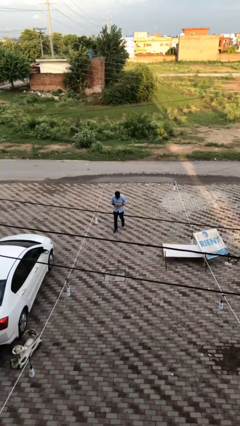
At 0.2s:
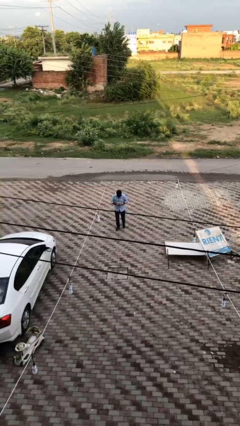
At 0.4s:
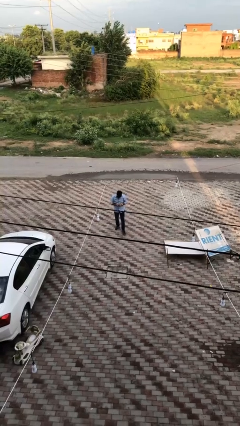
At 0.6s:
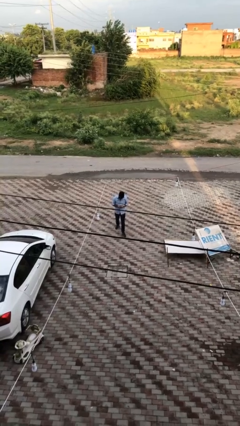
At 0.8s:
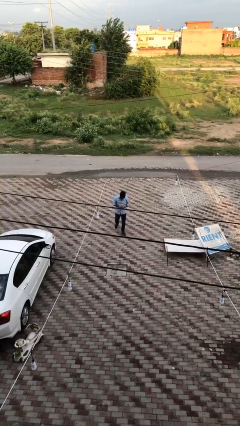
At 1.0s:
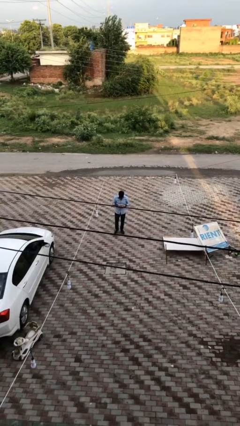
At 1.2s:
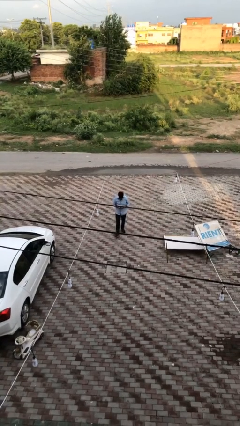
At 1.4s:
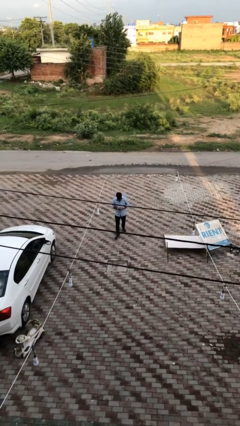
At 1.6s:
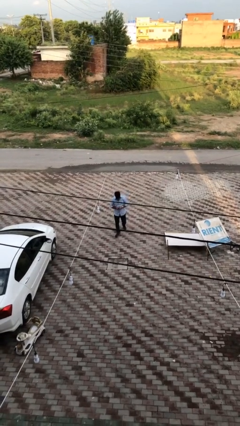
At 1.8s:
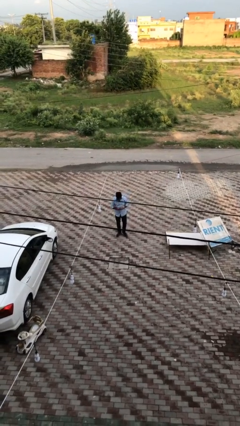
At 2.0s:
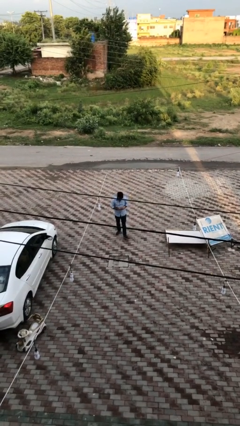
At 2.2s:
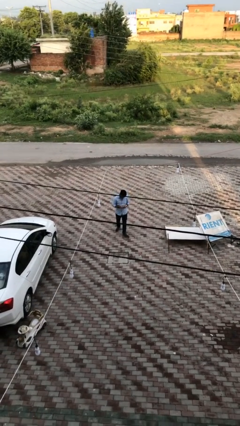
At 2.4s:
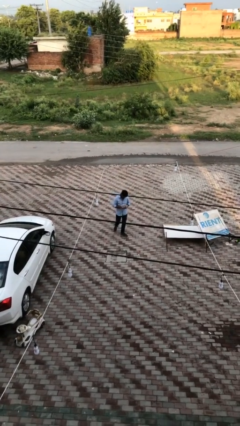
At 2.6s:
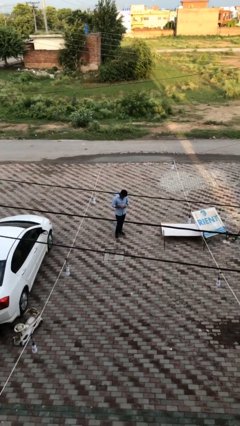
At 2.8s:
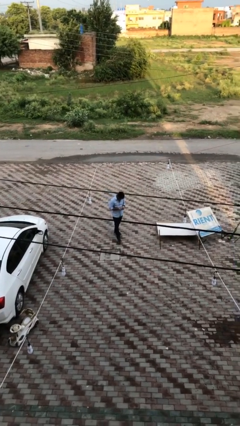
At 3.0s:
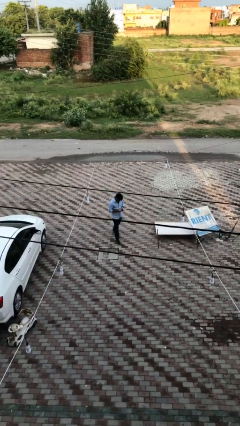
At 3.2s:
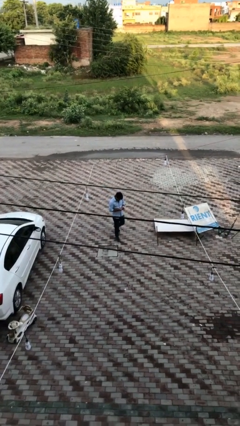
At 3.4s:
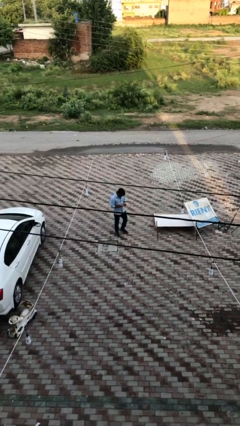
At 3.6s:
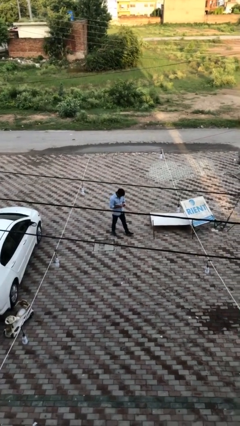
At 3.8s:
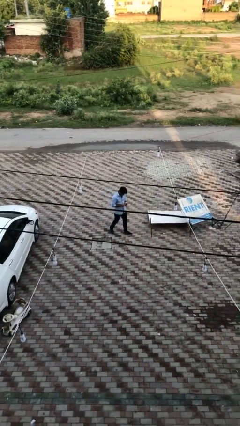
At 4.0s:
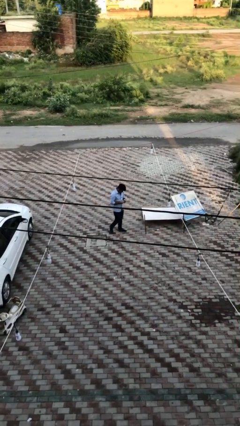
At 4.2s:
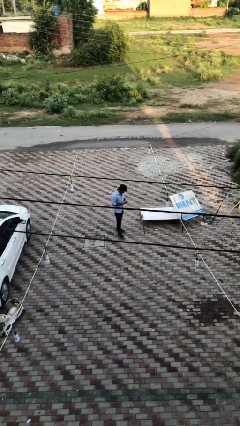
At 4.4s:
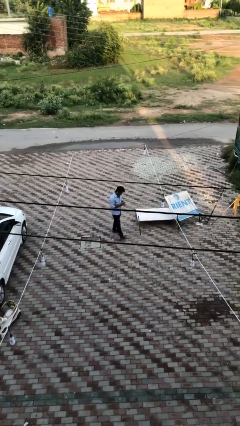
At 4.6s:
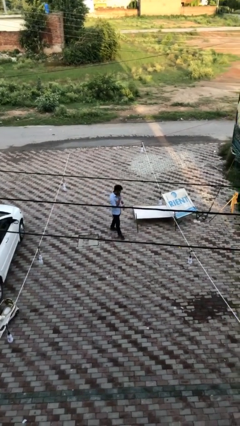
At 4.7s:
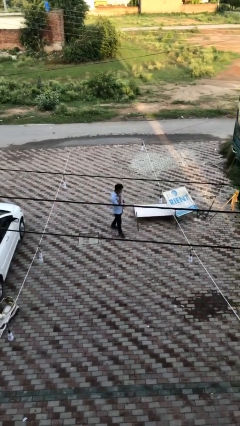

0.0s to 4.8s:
person texts on phone

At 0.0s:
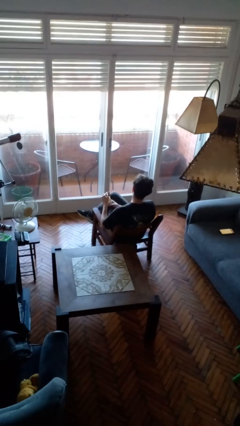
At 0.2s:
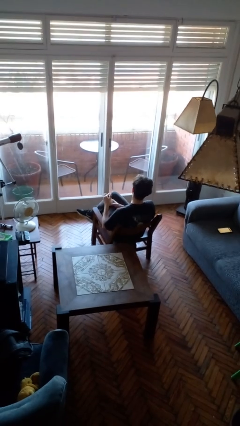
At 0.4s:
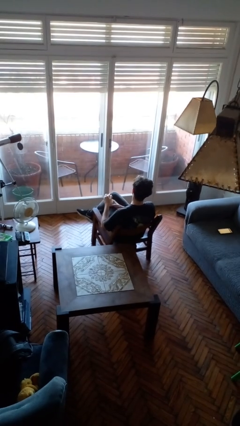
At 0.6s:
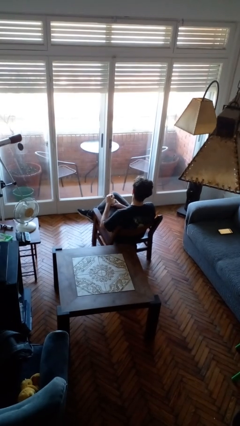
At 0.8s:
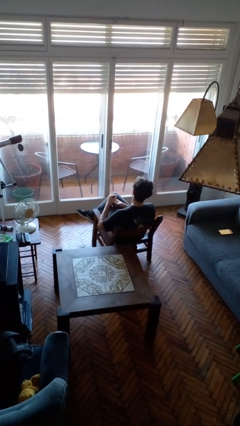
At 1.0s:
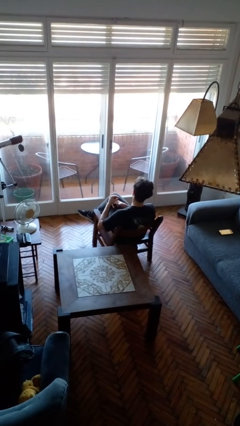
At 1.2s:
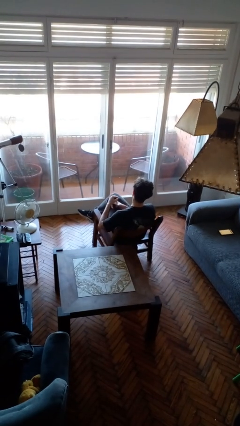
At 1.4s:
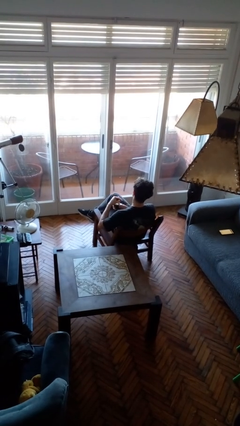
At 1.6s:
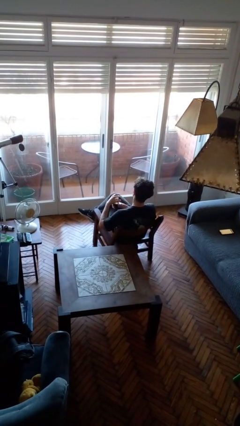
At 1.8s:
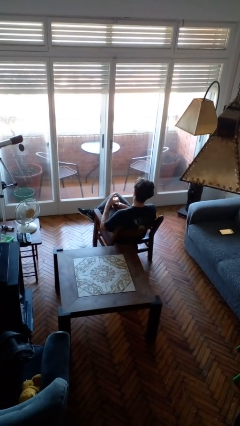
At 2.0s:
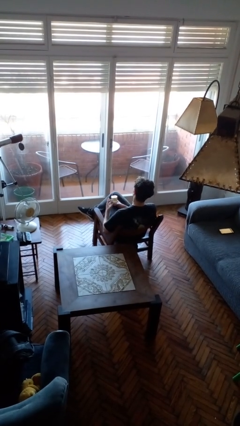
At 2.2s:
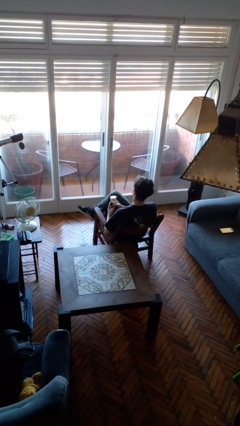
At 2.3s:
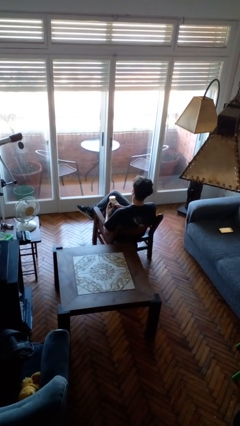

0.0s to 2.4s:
person closes jar

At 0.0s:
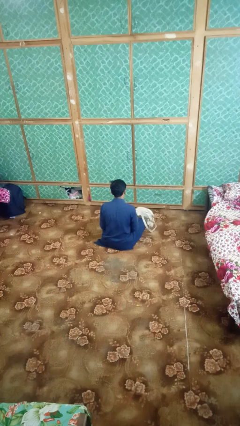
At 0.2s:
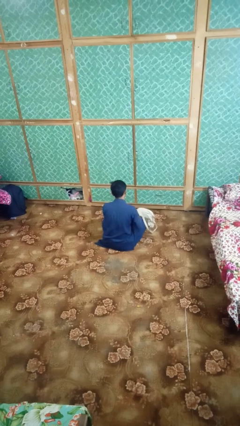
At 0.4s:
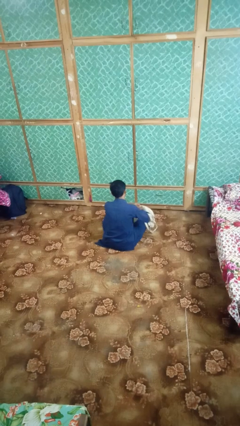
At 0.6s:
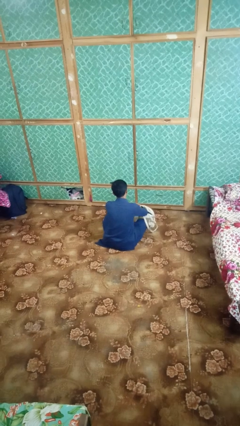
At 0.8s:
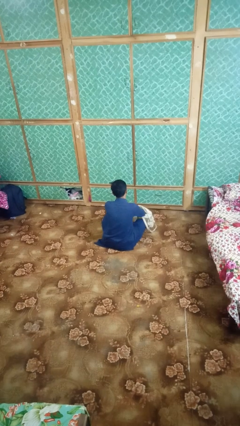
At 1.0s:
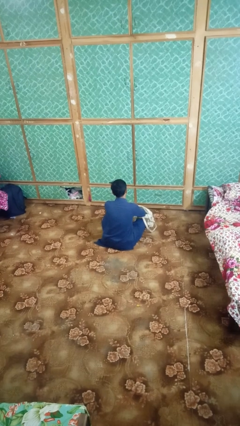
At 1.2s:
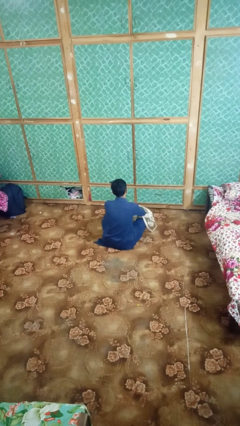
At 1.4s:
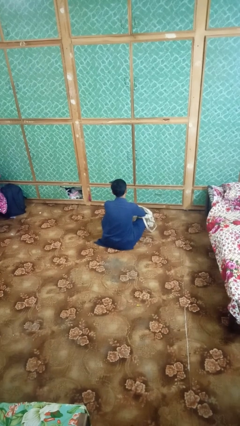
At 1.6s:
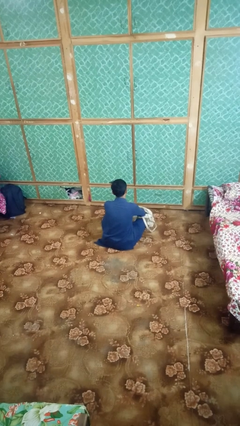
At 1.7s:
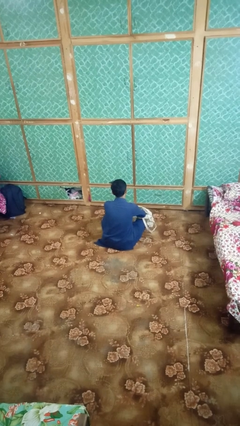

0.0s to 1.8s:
person searches in bag

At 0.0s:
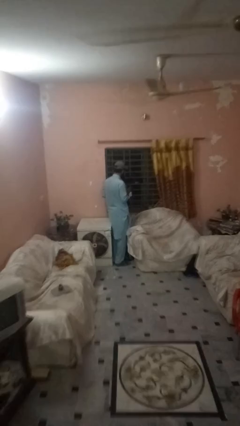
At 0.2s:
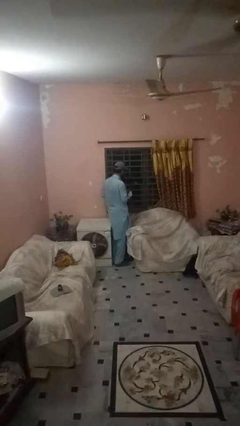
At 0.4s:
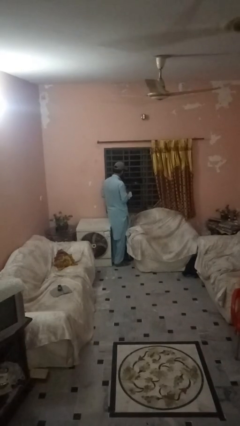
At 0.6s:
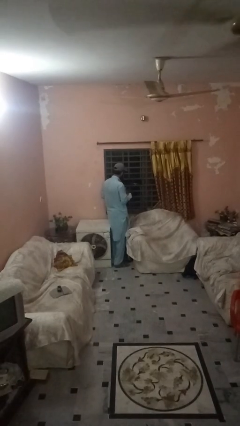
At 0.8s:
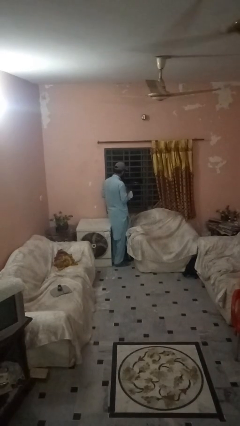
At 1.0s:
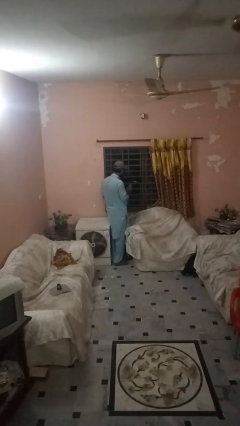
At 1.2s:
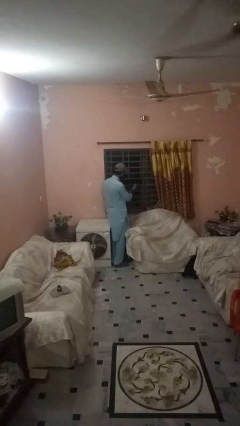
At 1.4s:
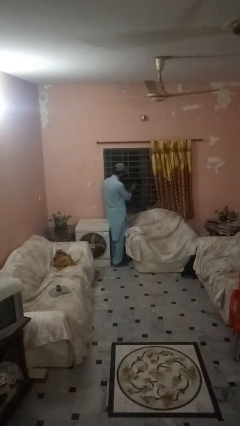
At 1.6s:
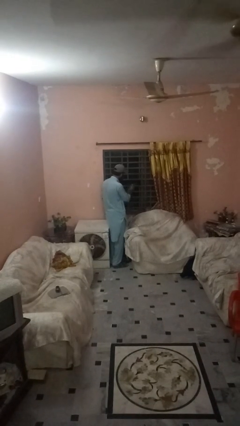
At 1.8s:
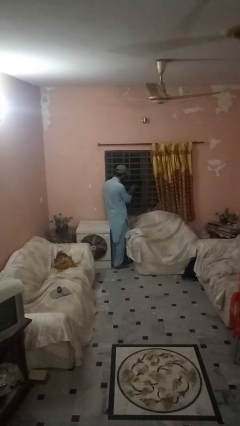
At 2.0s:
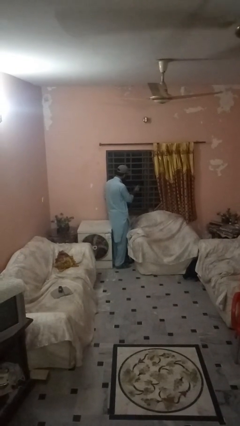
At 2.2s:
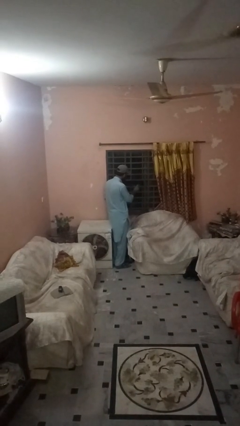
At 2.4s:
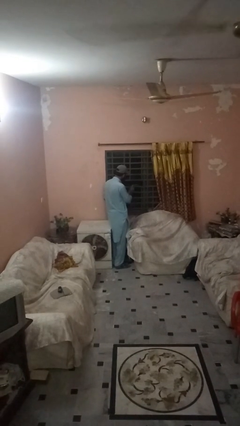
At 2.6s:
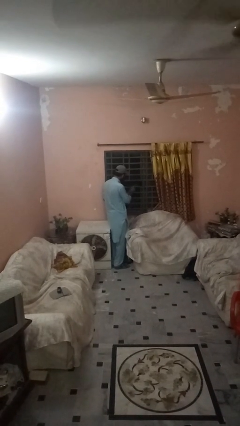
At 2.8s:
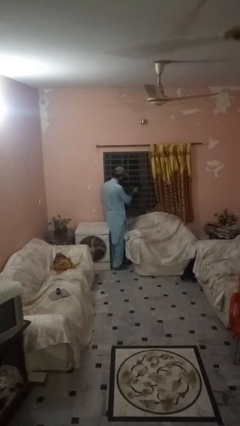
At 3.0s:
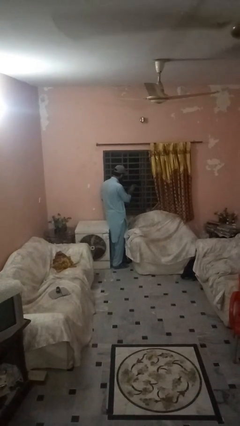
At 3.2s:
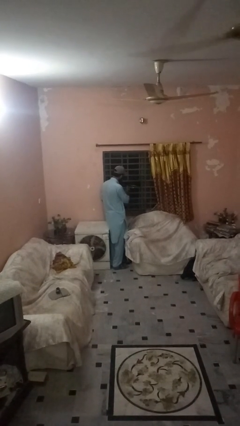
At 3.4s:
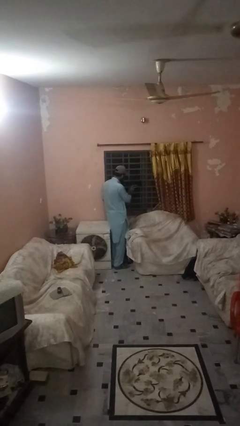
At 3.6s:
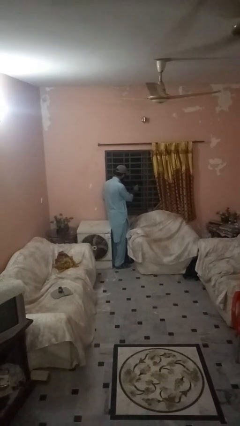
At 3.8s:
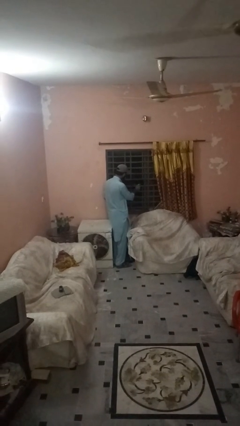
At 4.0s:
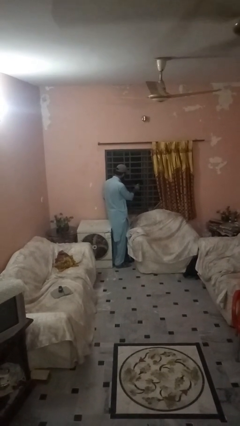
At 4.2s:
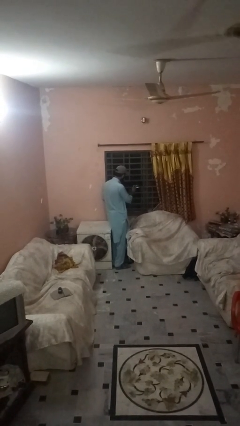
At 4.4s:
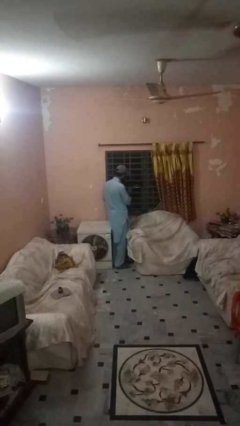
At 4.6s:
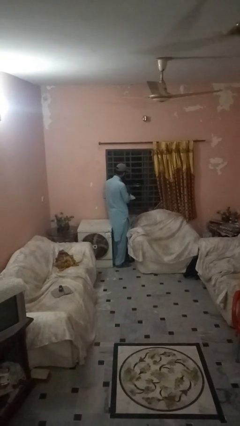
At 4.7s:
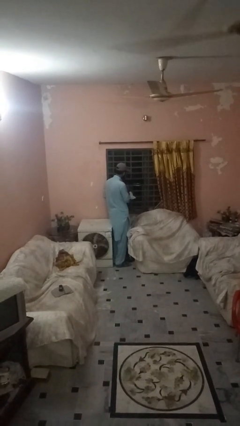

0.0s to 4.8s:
person sprays from bottle

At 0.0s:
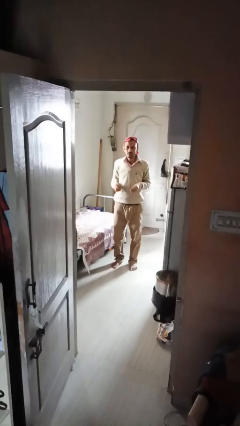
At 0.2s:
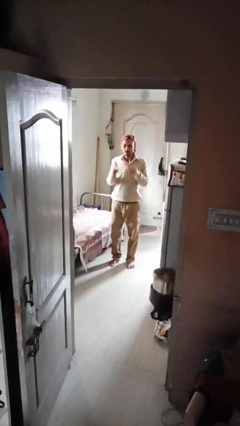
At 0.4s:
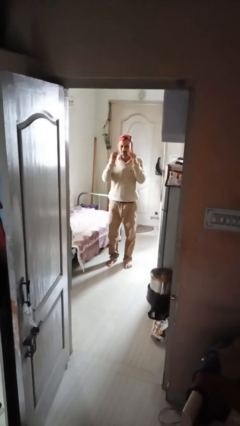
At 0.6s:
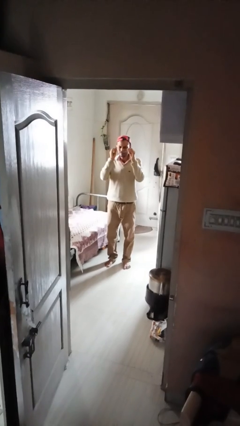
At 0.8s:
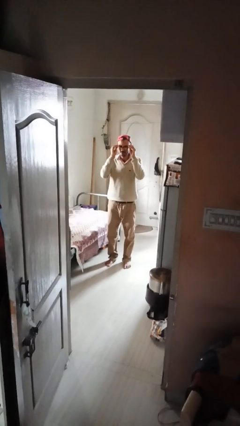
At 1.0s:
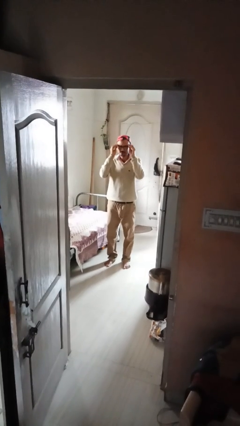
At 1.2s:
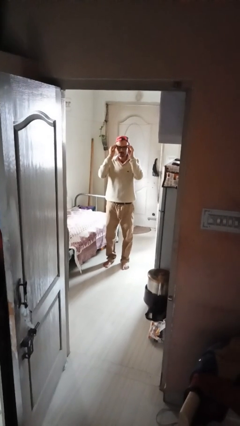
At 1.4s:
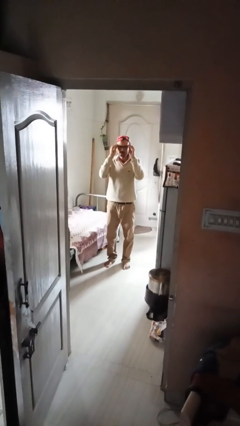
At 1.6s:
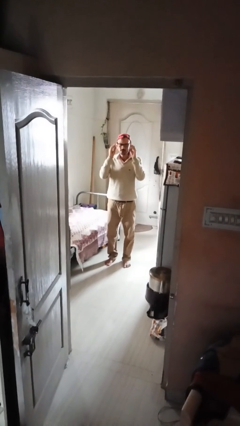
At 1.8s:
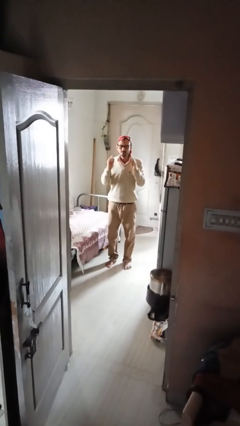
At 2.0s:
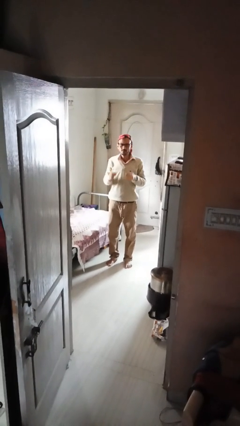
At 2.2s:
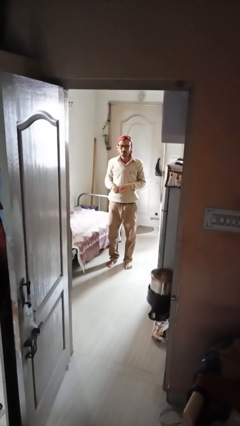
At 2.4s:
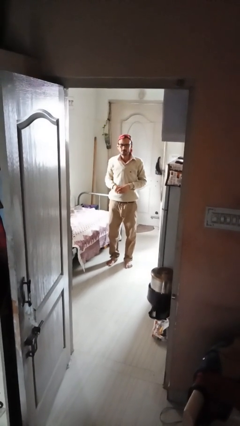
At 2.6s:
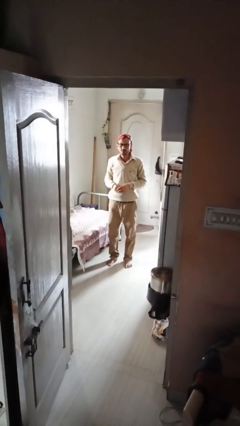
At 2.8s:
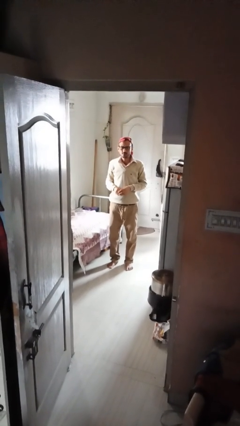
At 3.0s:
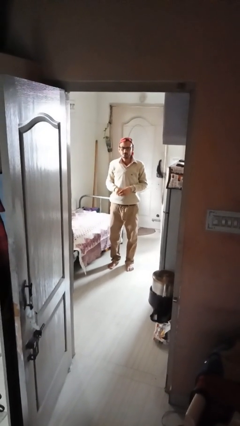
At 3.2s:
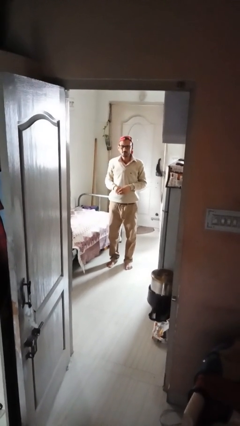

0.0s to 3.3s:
person puts on sunglasses

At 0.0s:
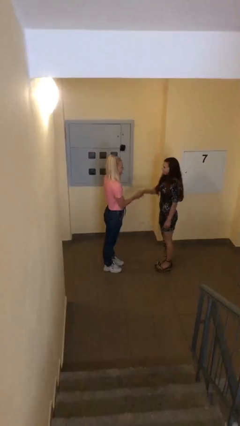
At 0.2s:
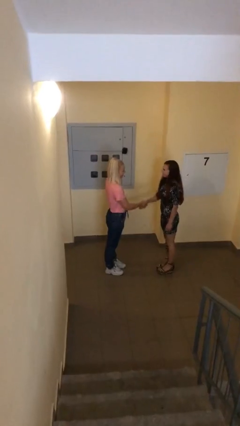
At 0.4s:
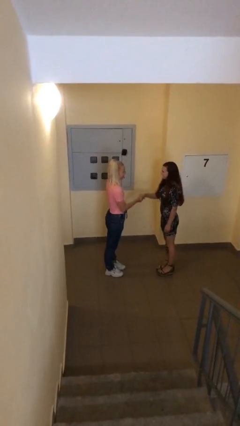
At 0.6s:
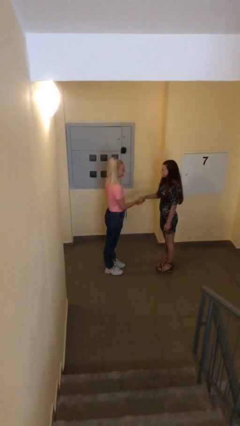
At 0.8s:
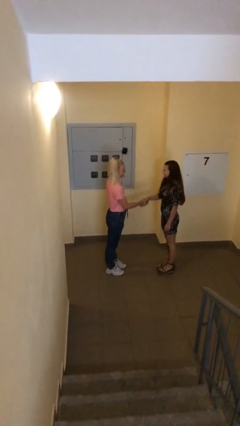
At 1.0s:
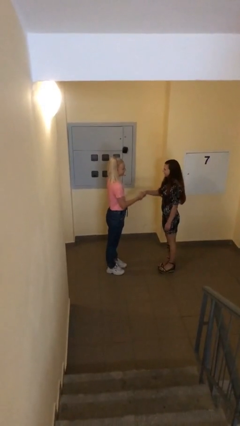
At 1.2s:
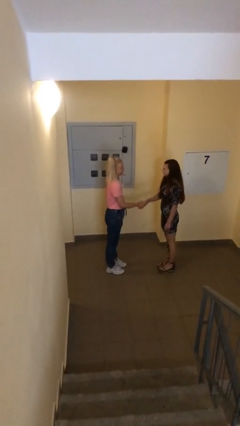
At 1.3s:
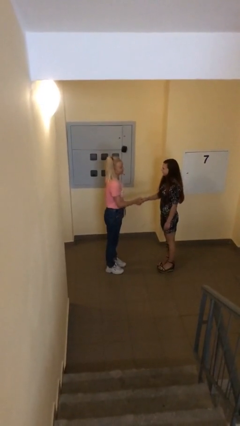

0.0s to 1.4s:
person shakes hand
